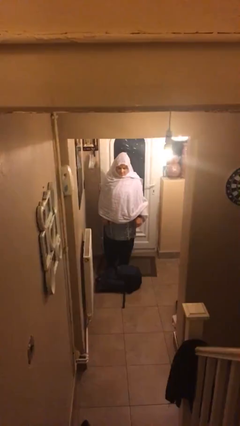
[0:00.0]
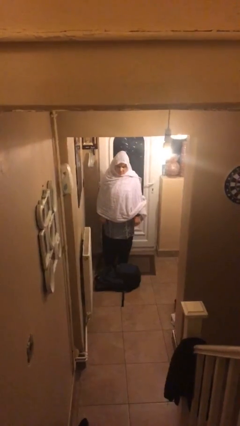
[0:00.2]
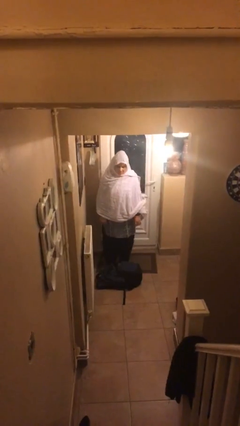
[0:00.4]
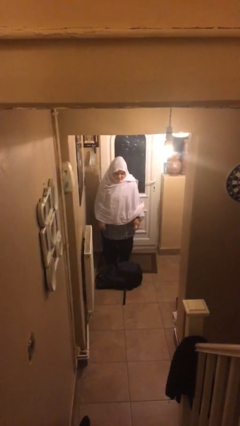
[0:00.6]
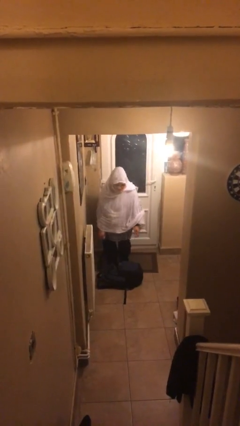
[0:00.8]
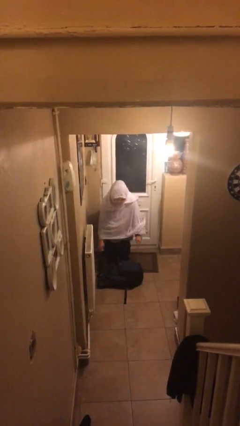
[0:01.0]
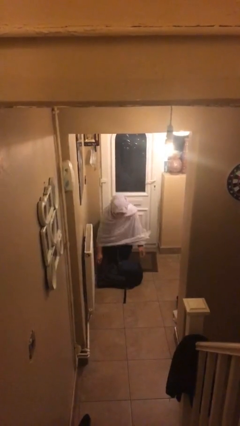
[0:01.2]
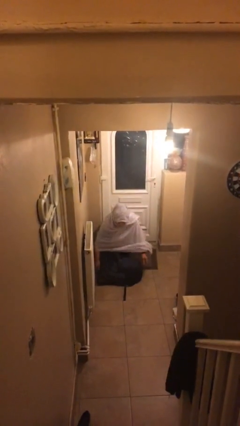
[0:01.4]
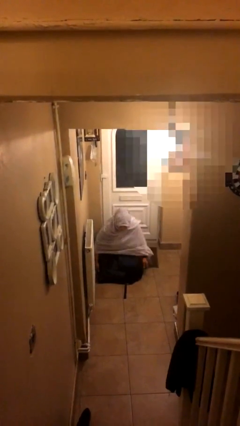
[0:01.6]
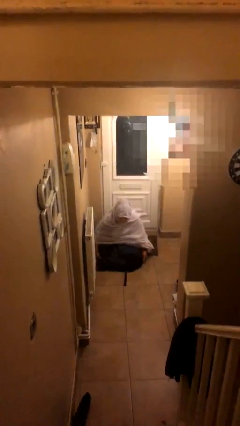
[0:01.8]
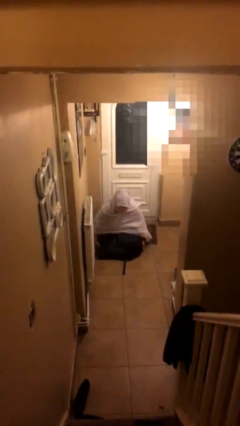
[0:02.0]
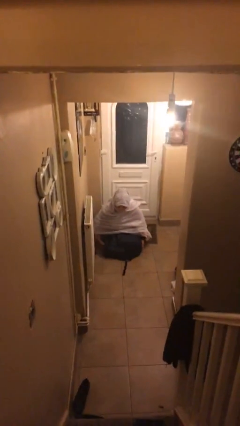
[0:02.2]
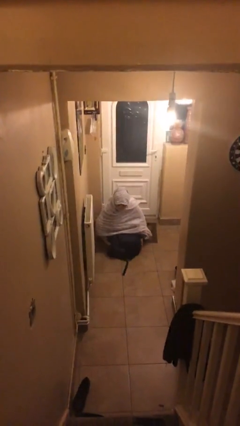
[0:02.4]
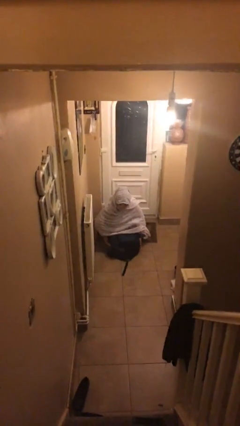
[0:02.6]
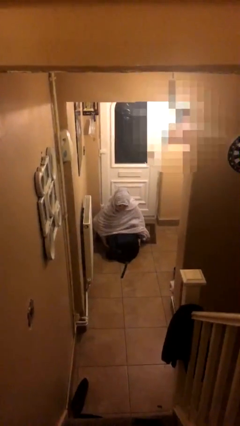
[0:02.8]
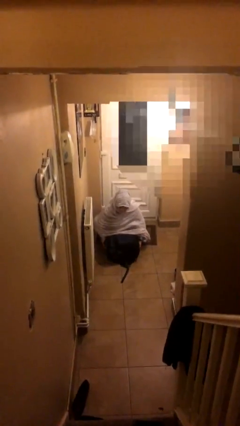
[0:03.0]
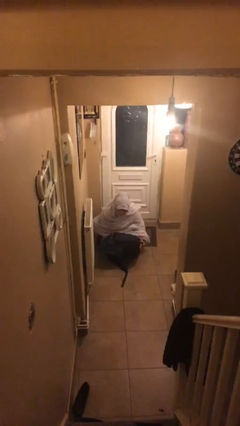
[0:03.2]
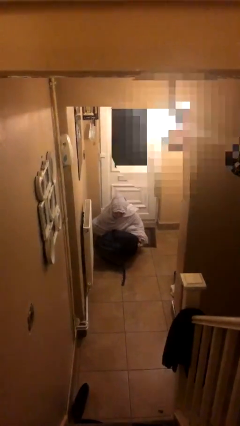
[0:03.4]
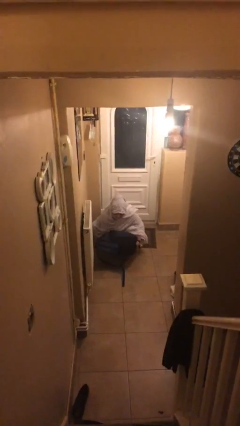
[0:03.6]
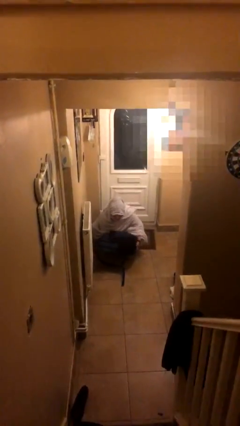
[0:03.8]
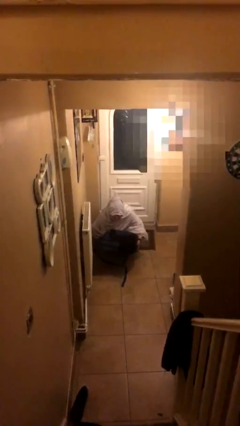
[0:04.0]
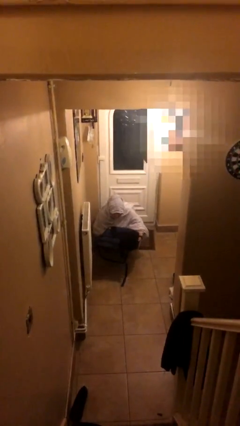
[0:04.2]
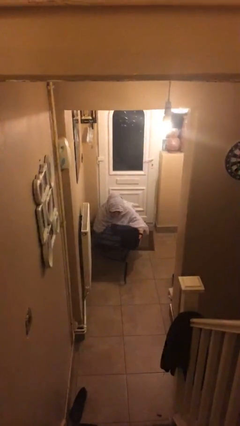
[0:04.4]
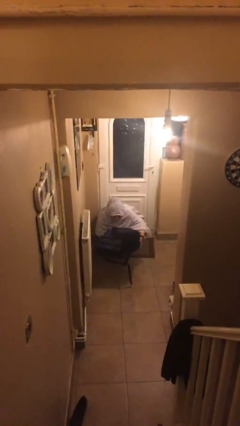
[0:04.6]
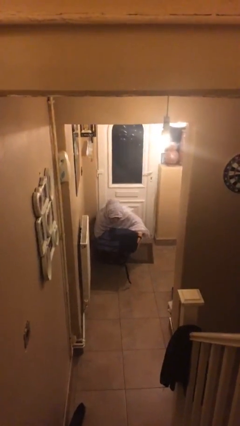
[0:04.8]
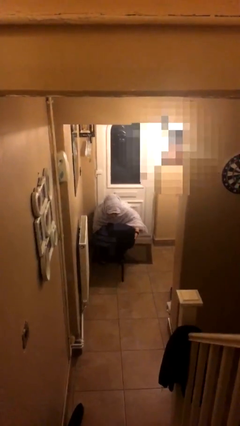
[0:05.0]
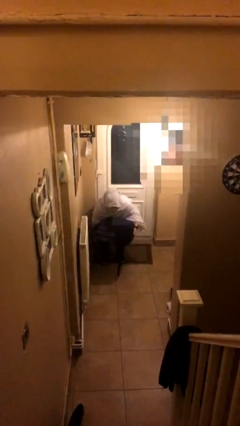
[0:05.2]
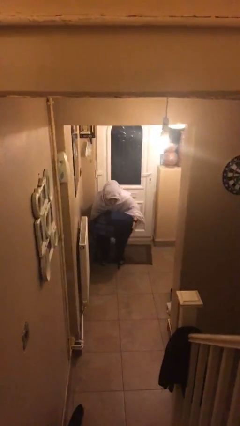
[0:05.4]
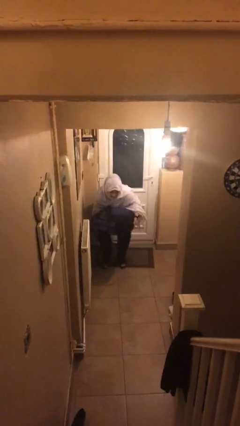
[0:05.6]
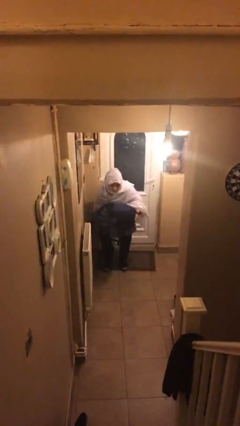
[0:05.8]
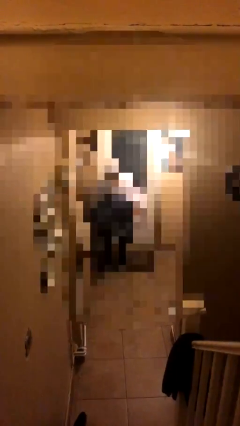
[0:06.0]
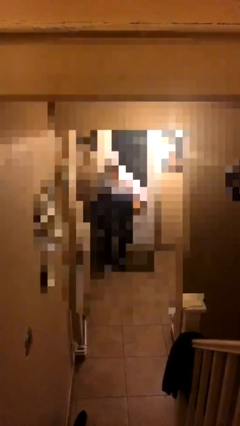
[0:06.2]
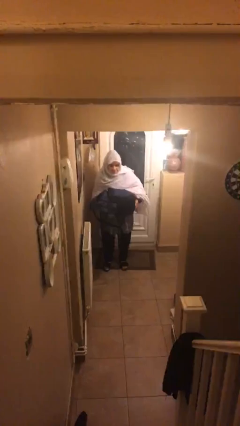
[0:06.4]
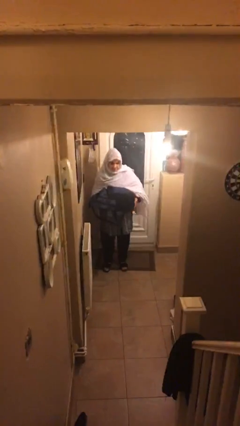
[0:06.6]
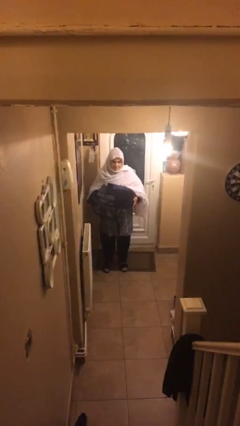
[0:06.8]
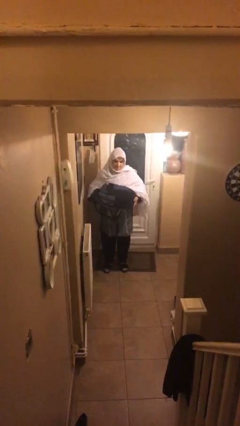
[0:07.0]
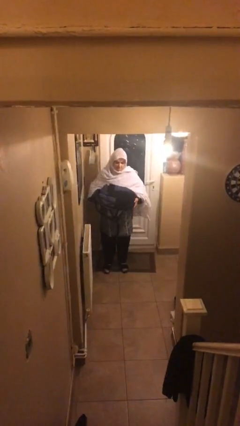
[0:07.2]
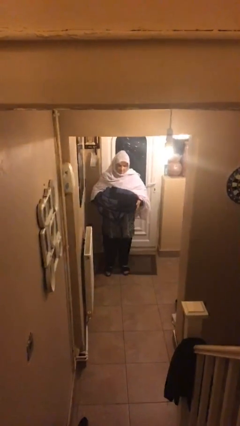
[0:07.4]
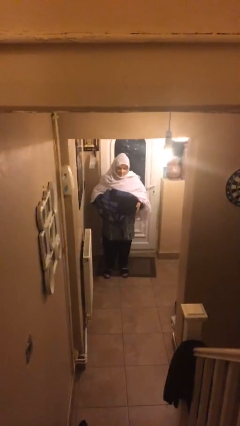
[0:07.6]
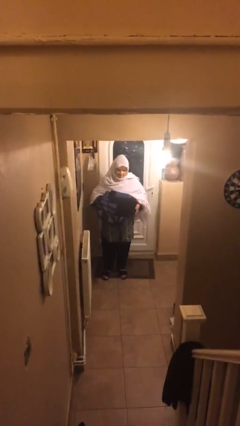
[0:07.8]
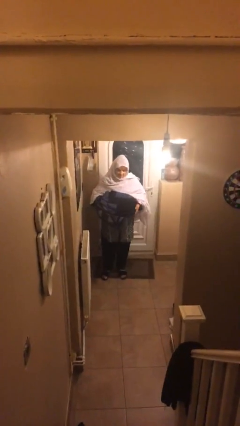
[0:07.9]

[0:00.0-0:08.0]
person picks up object from floor

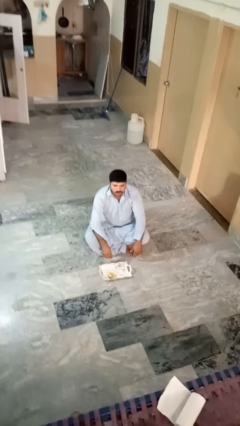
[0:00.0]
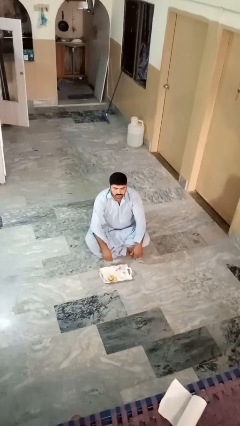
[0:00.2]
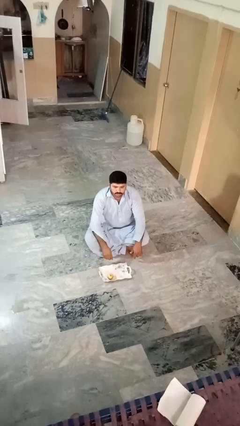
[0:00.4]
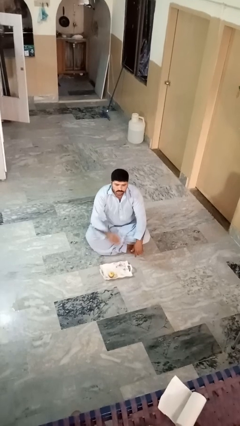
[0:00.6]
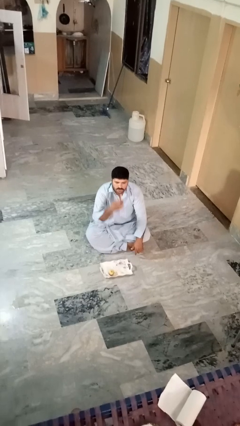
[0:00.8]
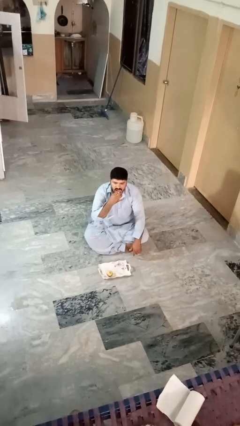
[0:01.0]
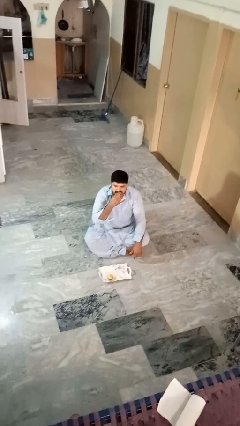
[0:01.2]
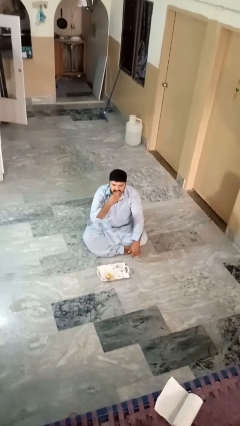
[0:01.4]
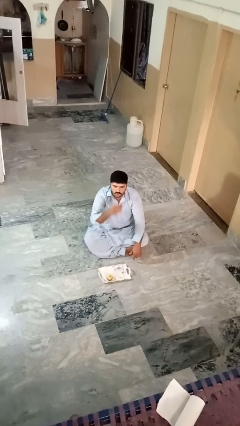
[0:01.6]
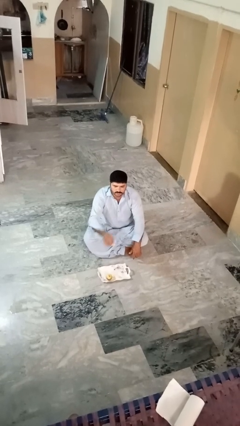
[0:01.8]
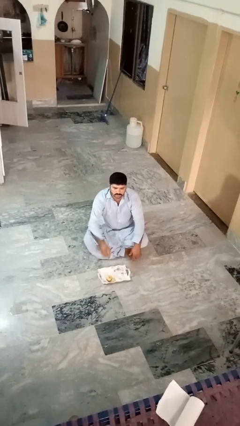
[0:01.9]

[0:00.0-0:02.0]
person eats apple

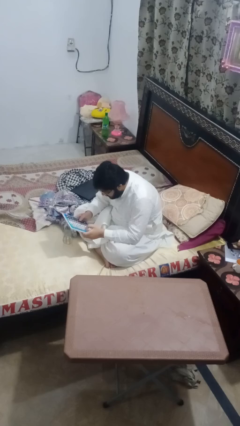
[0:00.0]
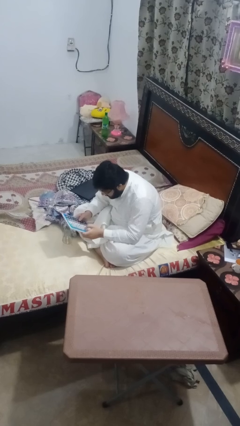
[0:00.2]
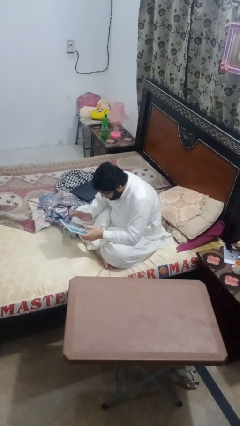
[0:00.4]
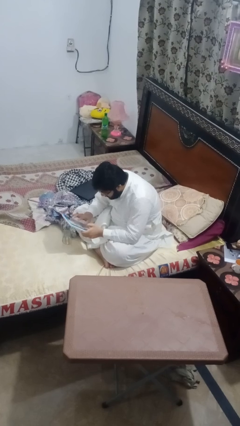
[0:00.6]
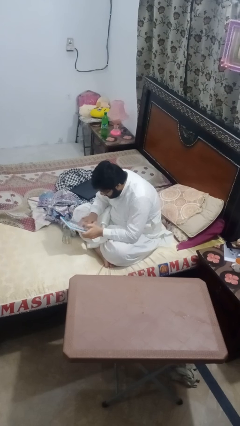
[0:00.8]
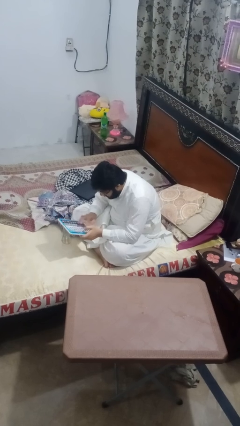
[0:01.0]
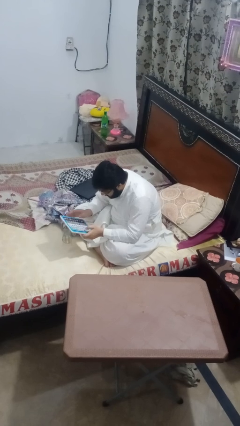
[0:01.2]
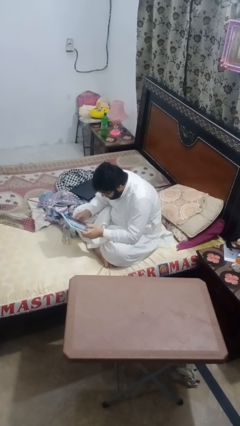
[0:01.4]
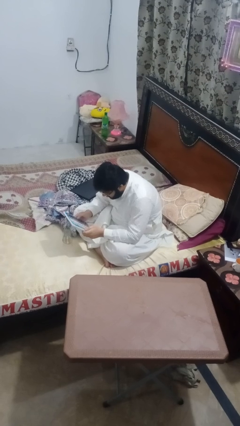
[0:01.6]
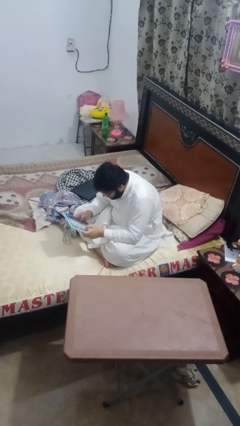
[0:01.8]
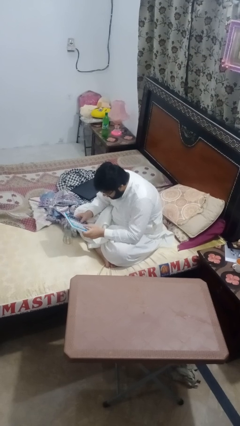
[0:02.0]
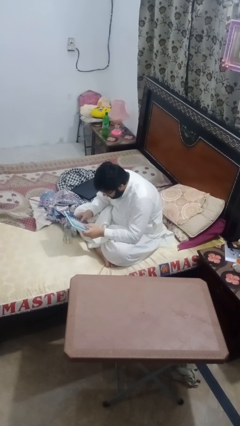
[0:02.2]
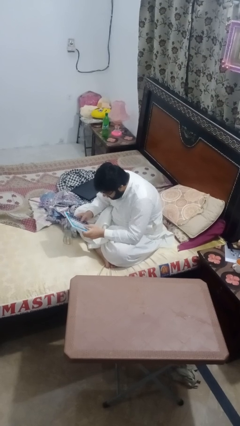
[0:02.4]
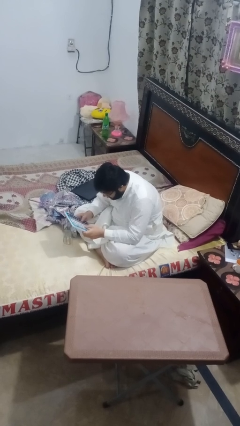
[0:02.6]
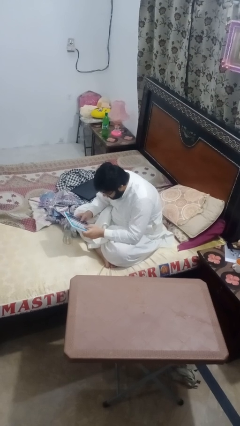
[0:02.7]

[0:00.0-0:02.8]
person interacts with tablet

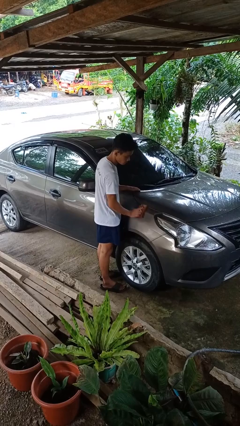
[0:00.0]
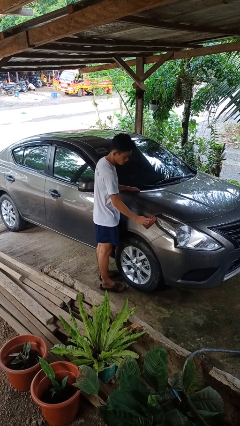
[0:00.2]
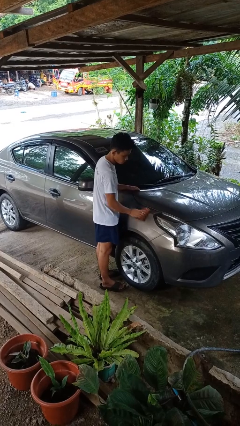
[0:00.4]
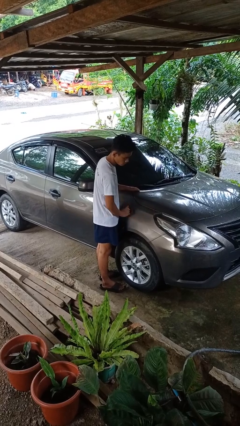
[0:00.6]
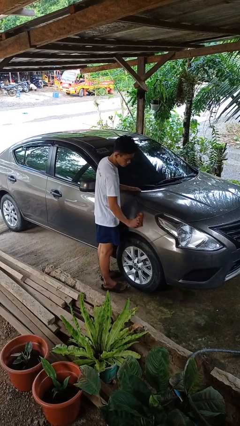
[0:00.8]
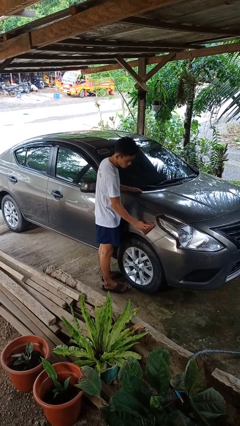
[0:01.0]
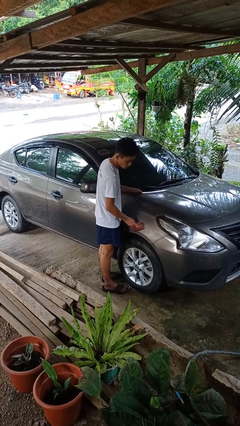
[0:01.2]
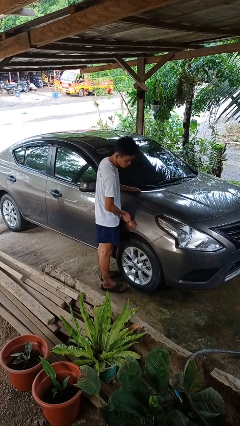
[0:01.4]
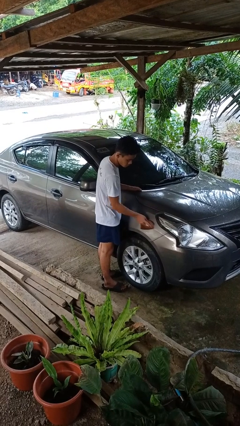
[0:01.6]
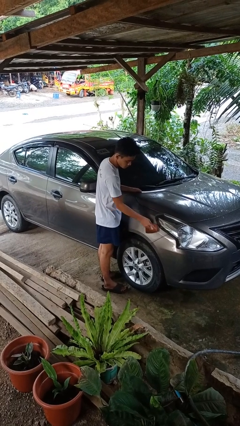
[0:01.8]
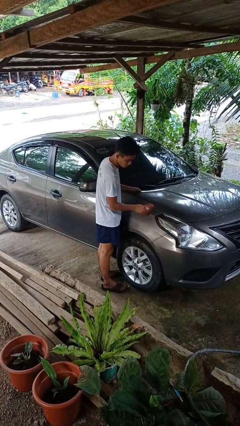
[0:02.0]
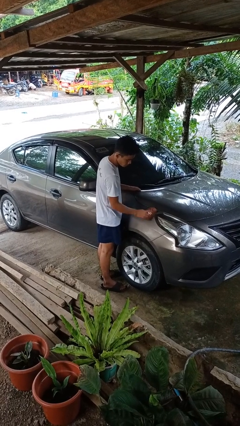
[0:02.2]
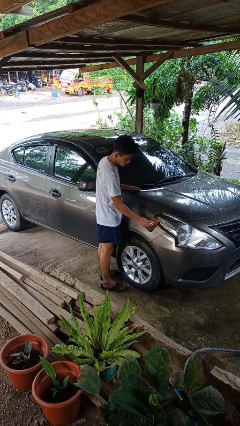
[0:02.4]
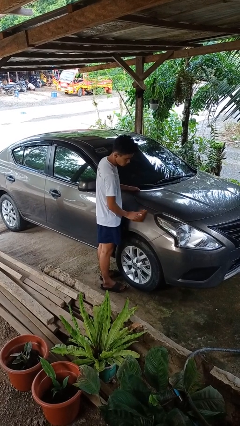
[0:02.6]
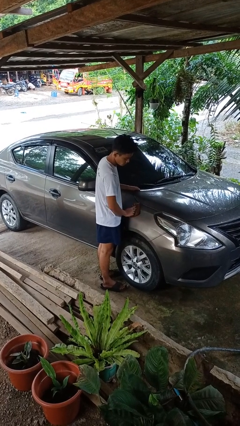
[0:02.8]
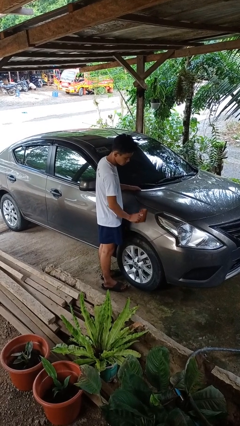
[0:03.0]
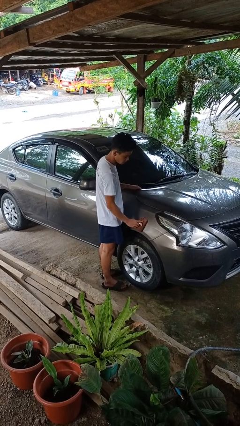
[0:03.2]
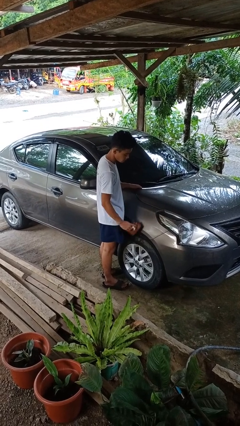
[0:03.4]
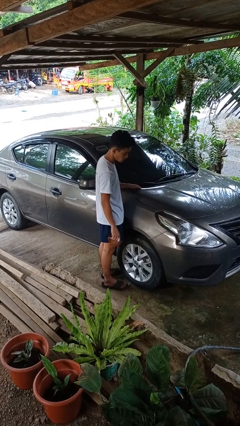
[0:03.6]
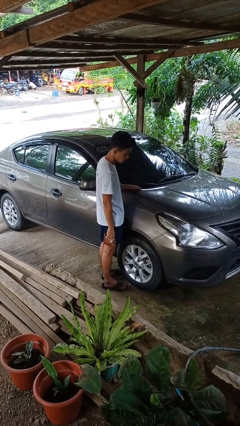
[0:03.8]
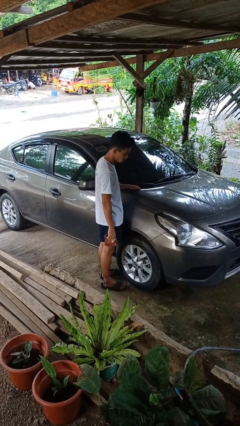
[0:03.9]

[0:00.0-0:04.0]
person polishes car with rag

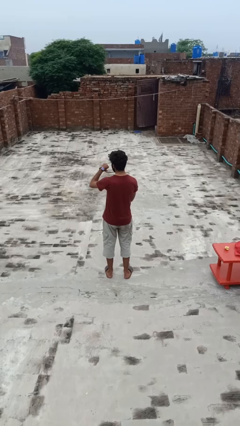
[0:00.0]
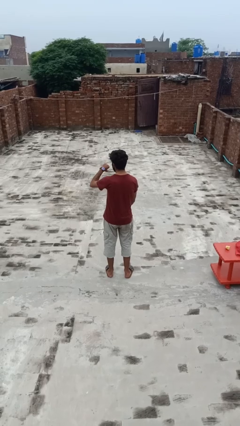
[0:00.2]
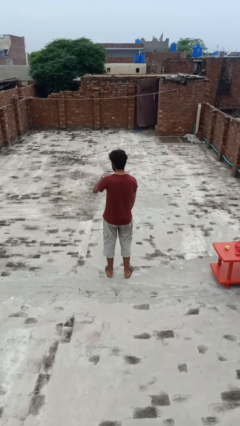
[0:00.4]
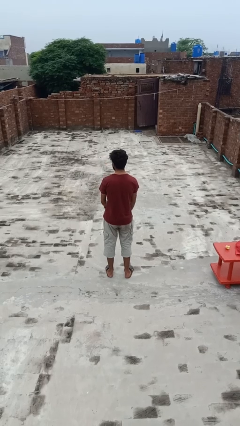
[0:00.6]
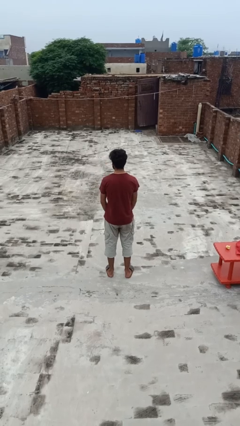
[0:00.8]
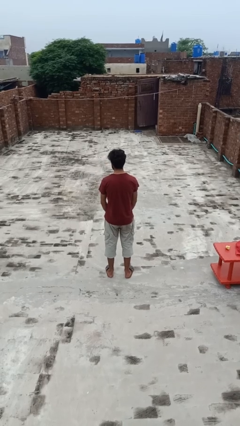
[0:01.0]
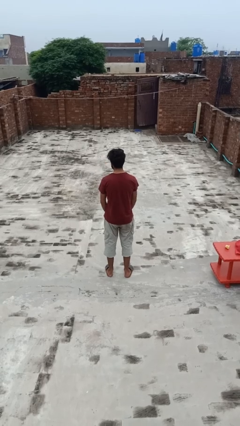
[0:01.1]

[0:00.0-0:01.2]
person gestures watch closely
